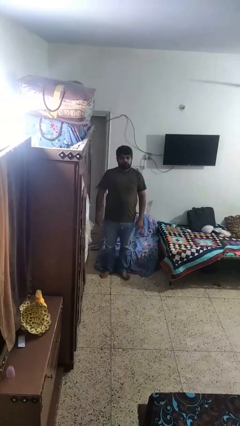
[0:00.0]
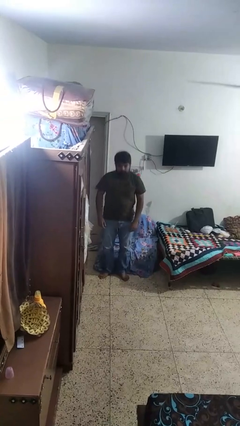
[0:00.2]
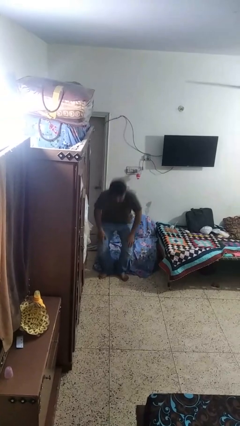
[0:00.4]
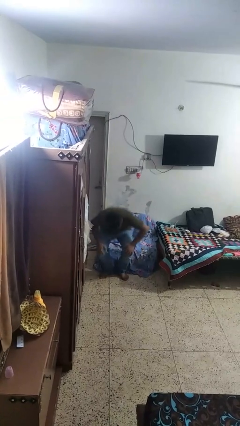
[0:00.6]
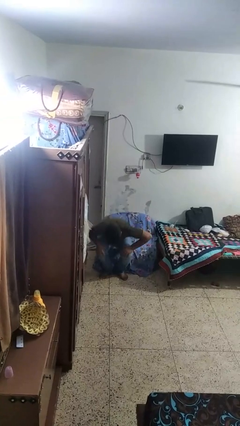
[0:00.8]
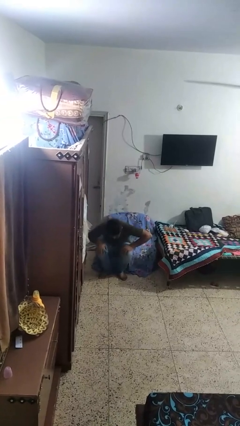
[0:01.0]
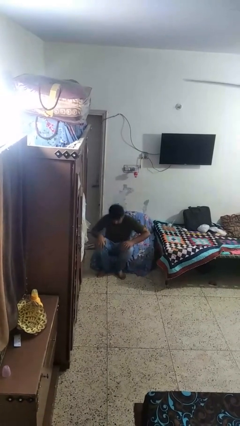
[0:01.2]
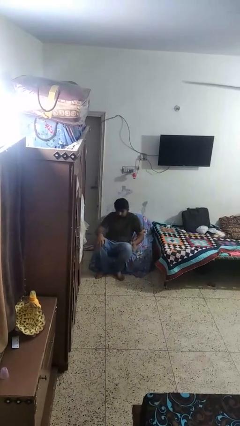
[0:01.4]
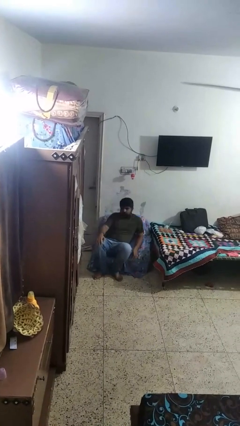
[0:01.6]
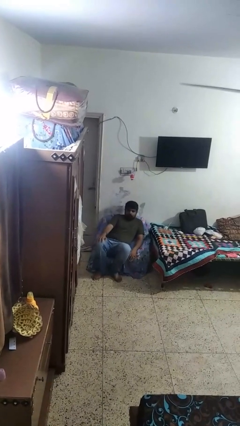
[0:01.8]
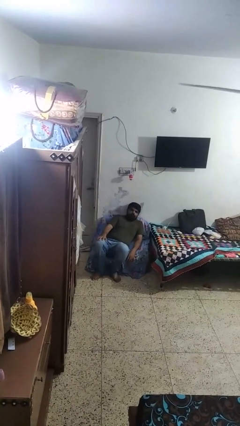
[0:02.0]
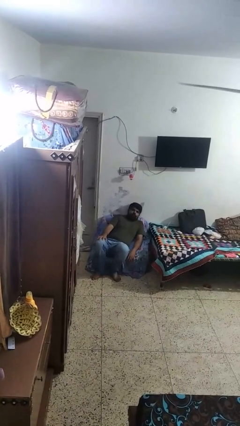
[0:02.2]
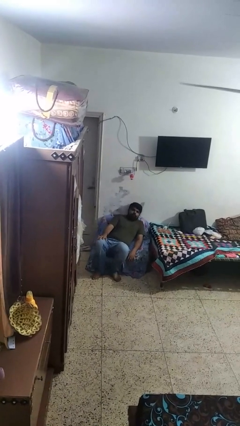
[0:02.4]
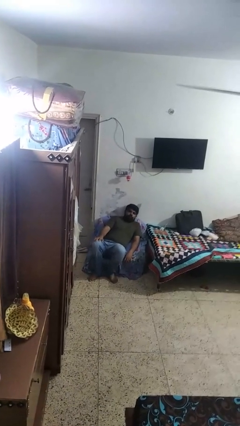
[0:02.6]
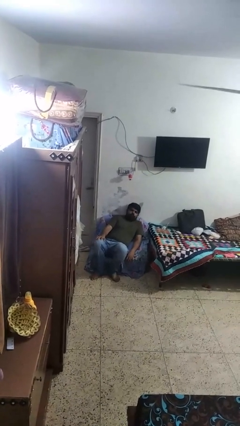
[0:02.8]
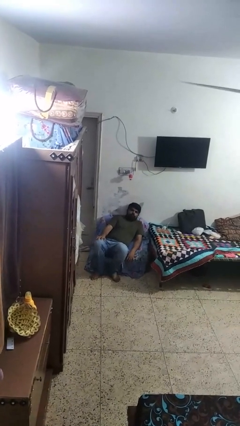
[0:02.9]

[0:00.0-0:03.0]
person lies down on couch

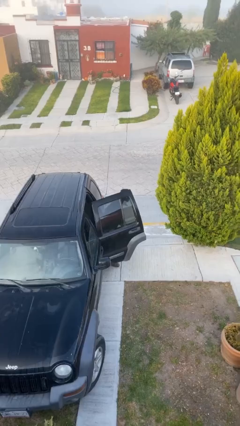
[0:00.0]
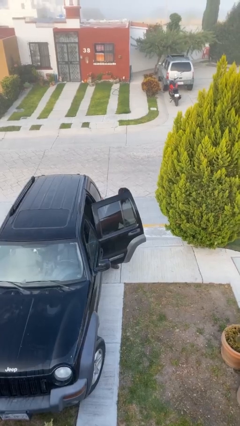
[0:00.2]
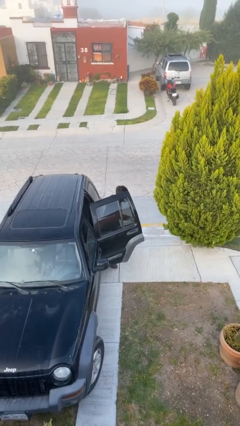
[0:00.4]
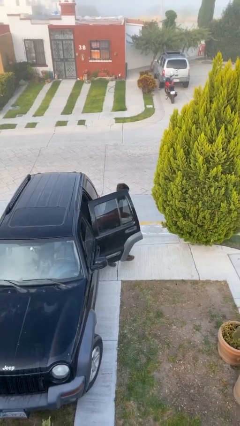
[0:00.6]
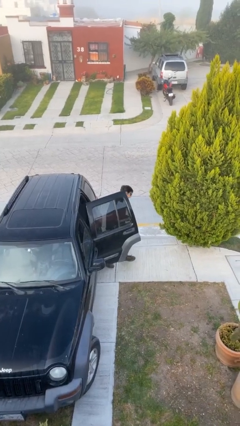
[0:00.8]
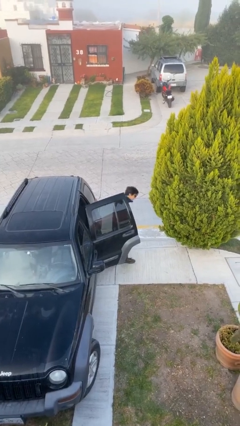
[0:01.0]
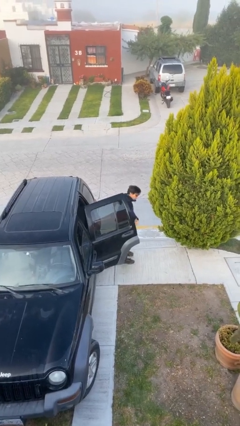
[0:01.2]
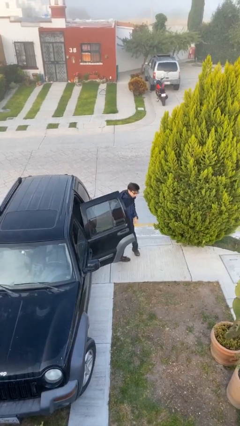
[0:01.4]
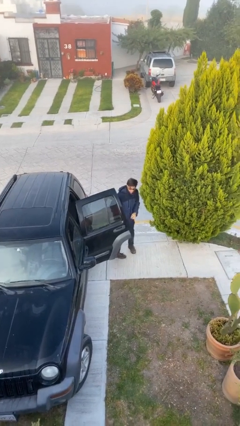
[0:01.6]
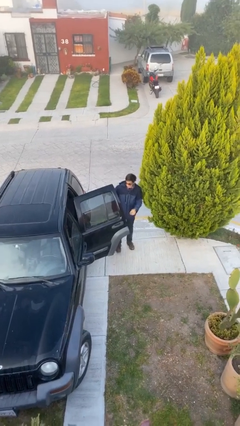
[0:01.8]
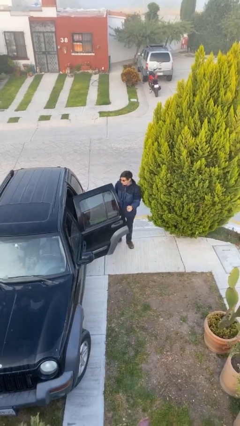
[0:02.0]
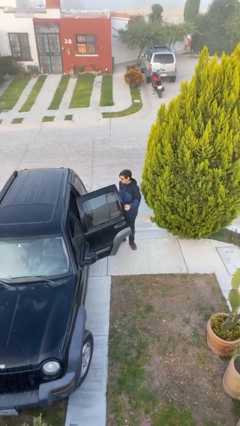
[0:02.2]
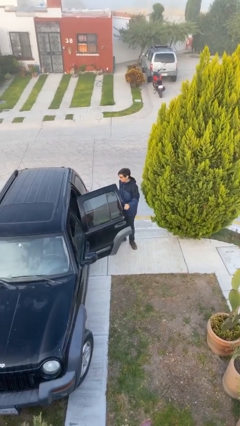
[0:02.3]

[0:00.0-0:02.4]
person exits car

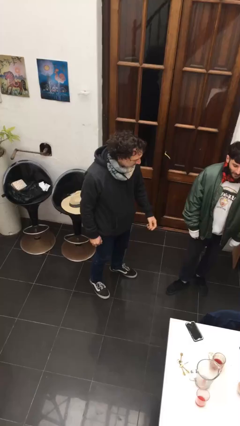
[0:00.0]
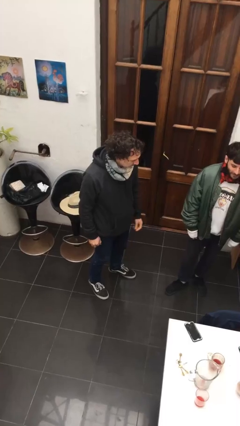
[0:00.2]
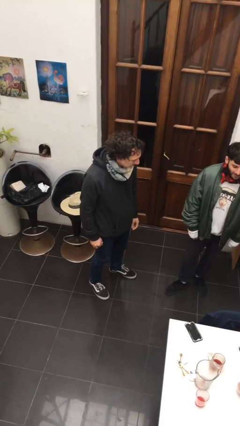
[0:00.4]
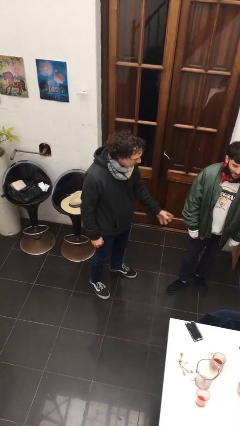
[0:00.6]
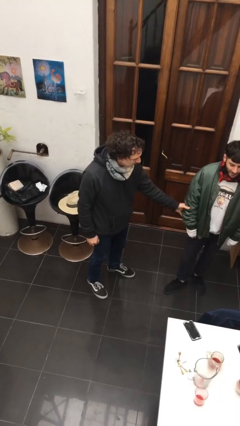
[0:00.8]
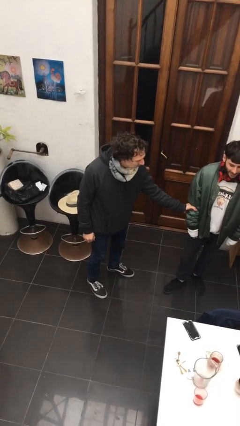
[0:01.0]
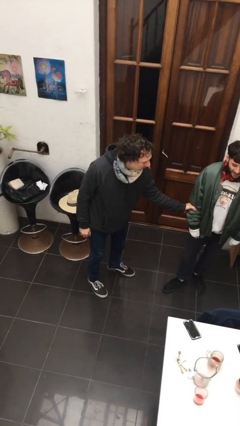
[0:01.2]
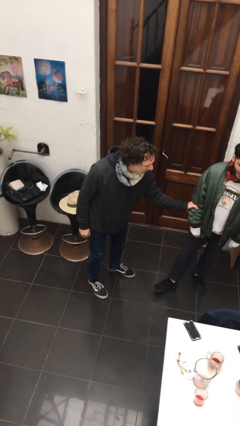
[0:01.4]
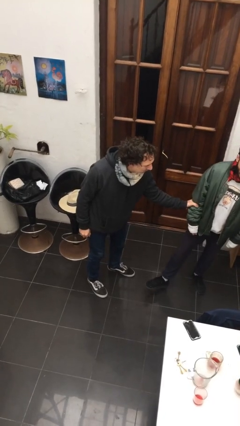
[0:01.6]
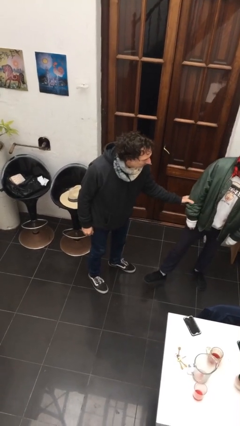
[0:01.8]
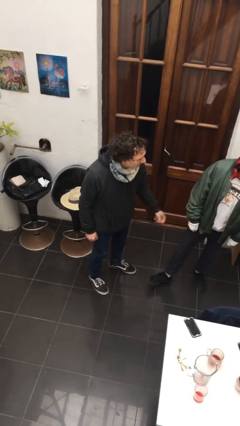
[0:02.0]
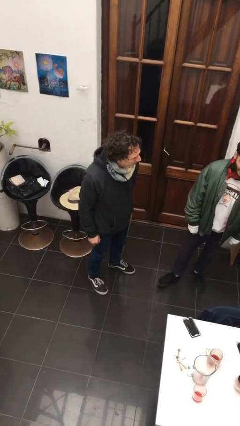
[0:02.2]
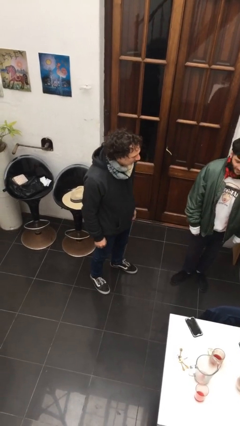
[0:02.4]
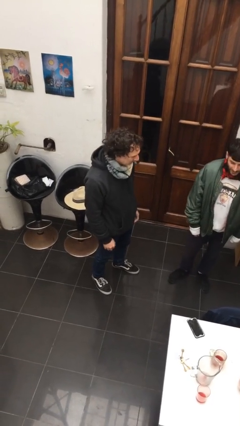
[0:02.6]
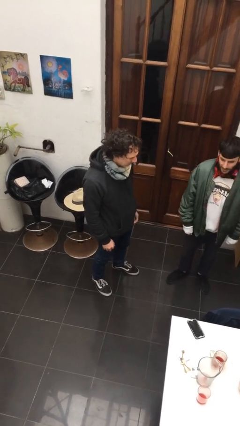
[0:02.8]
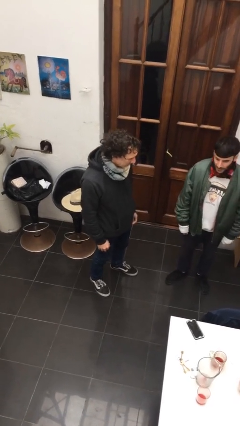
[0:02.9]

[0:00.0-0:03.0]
person grabs person by forearm

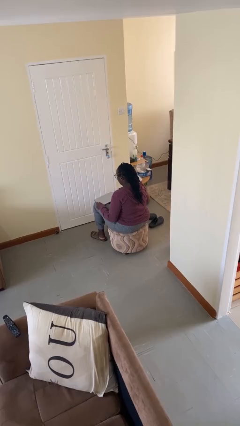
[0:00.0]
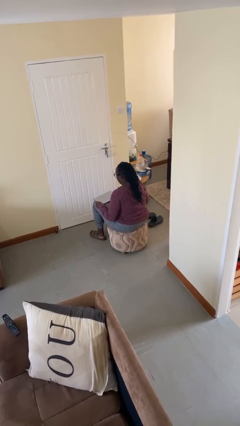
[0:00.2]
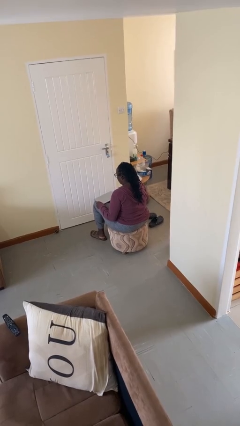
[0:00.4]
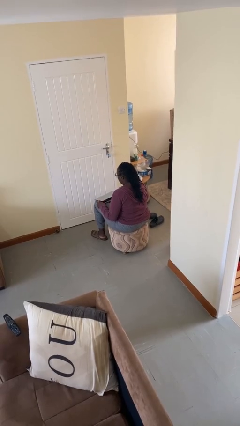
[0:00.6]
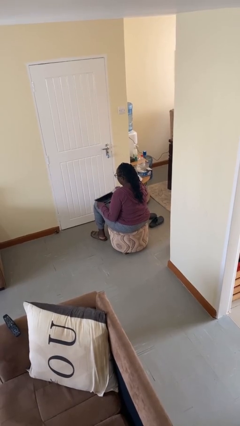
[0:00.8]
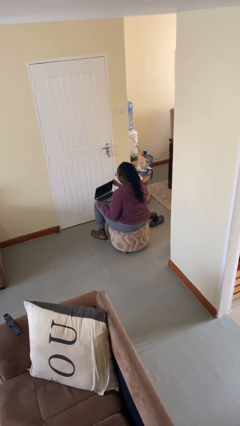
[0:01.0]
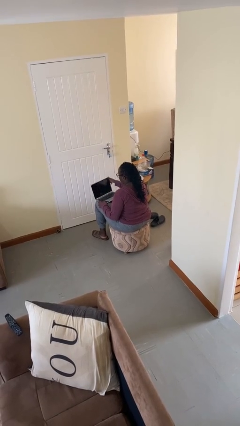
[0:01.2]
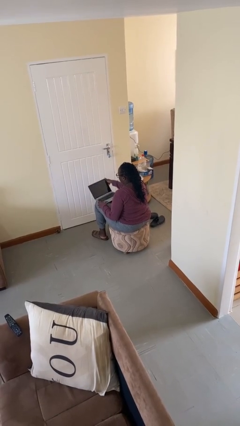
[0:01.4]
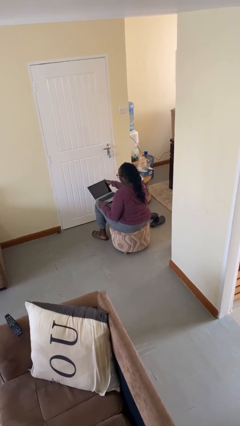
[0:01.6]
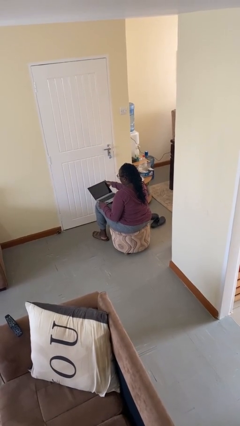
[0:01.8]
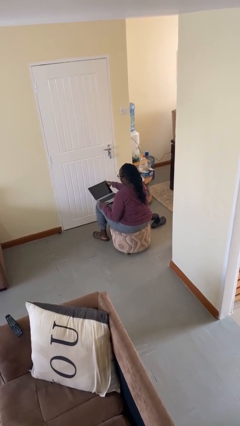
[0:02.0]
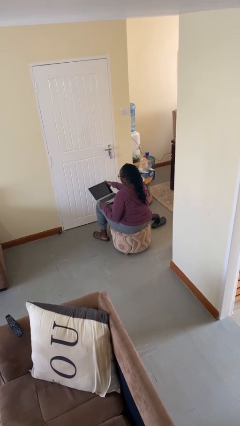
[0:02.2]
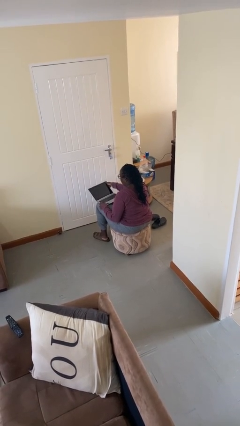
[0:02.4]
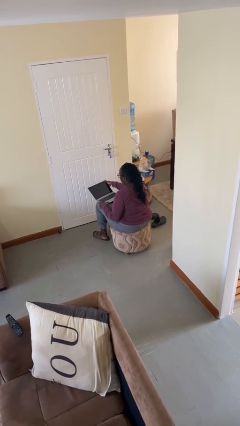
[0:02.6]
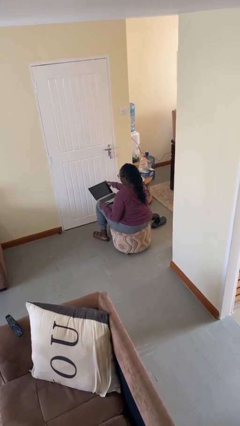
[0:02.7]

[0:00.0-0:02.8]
person opens laptop

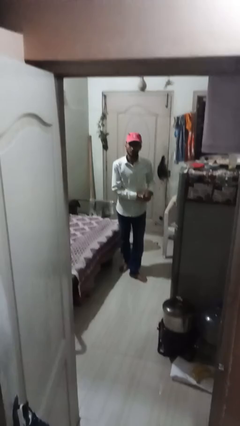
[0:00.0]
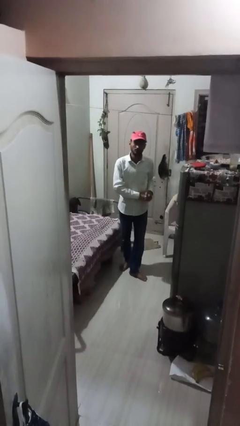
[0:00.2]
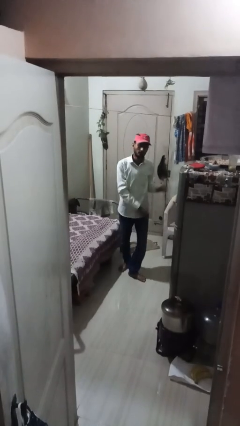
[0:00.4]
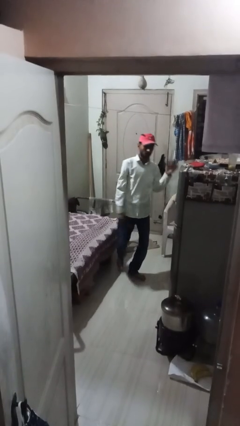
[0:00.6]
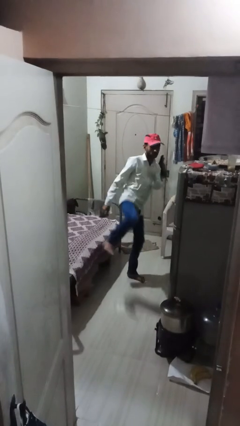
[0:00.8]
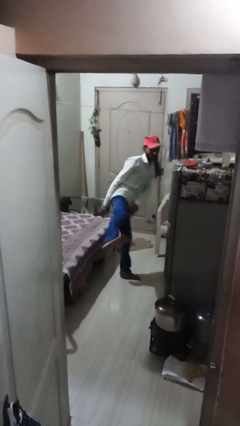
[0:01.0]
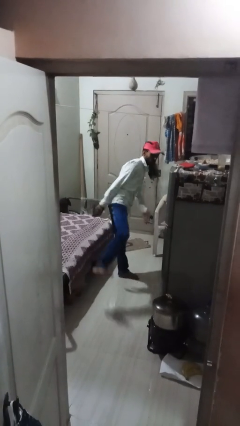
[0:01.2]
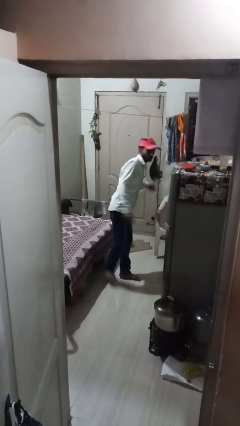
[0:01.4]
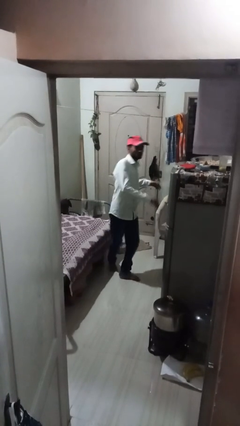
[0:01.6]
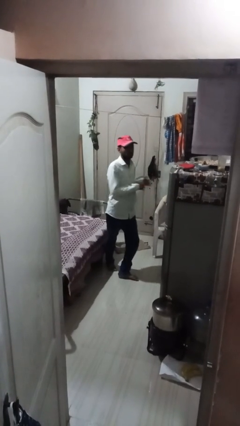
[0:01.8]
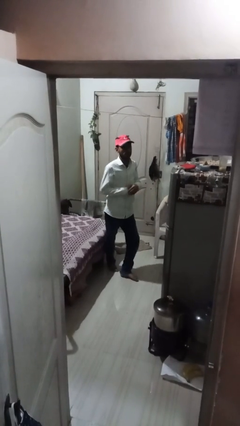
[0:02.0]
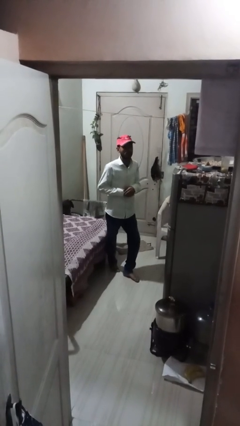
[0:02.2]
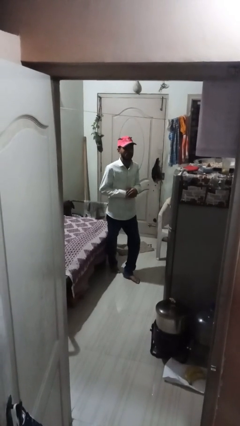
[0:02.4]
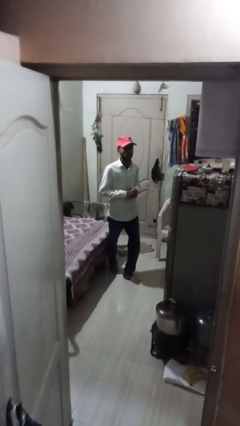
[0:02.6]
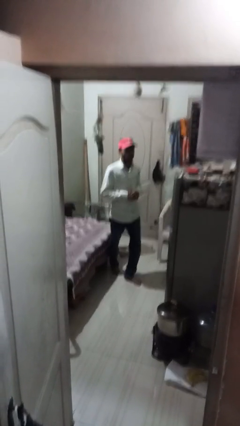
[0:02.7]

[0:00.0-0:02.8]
person karate kicks

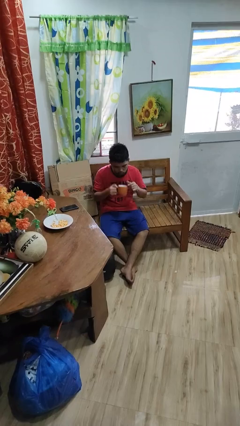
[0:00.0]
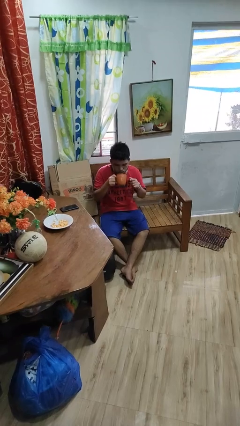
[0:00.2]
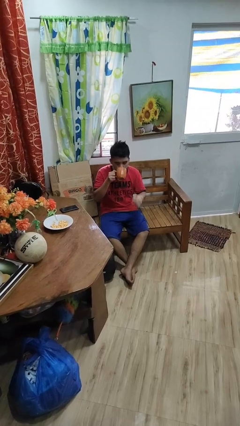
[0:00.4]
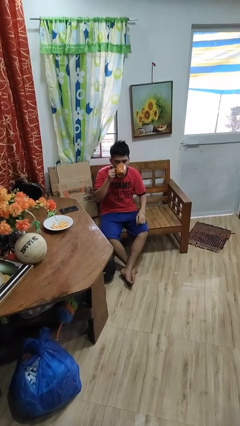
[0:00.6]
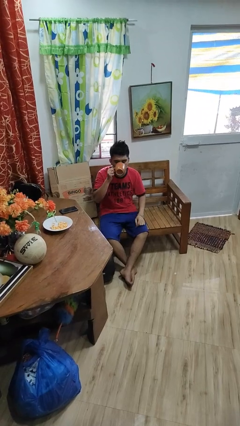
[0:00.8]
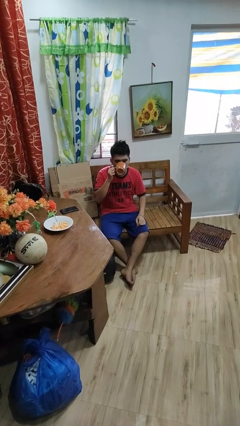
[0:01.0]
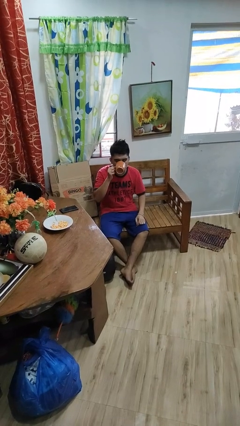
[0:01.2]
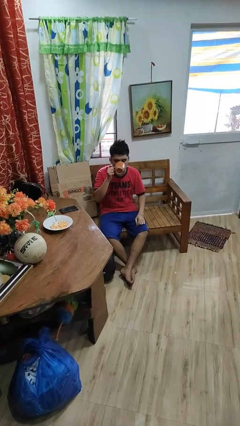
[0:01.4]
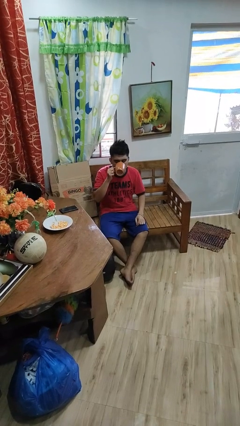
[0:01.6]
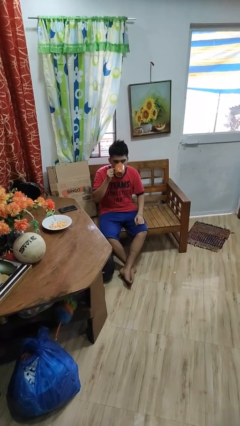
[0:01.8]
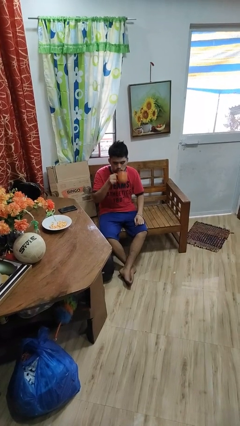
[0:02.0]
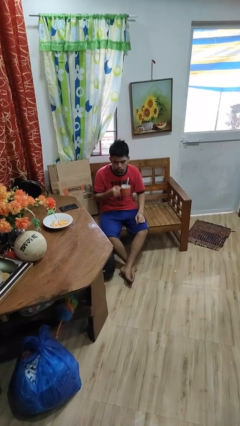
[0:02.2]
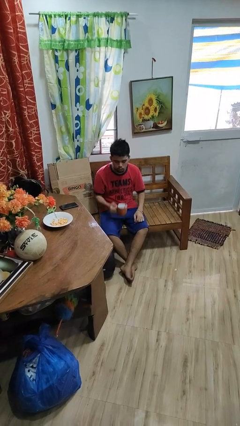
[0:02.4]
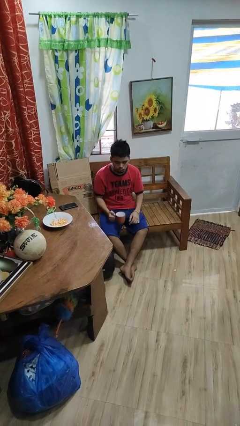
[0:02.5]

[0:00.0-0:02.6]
person drinks from mug

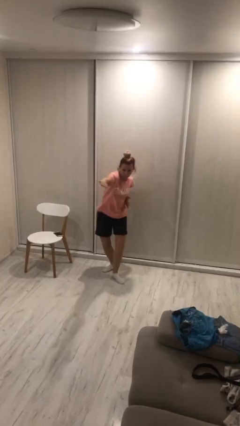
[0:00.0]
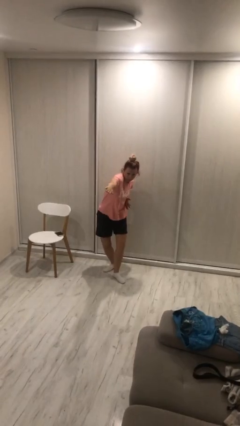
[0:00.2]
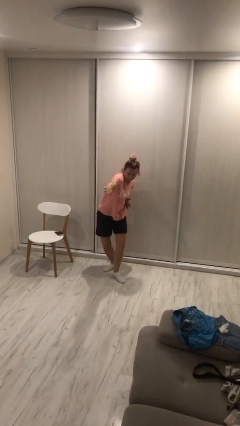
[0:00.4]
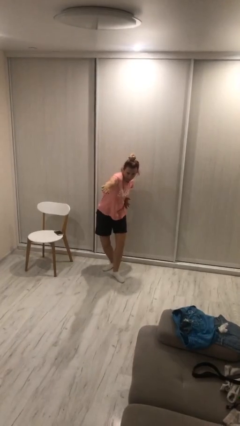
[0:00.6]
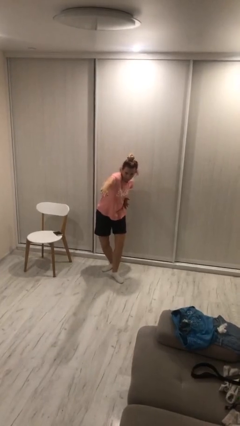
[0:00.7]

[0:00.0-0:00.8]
person karate chop
